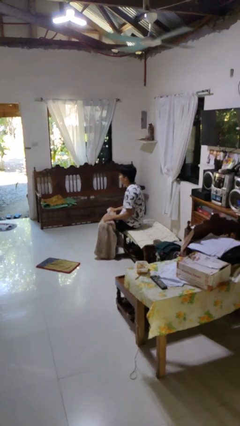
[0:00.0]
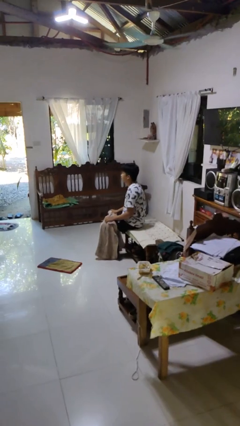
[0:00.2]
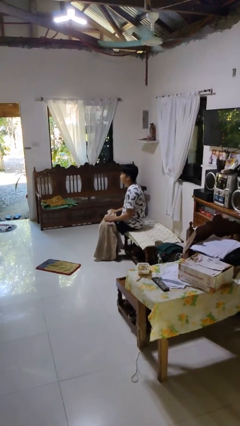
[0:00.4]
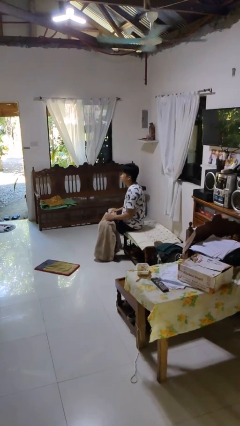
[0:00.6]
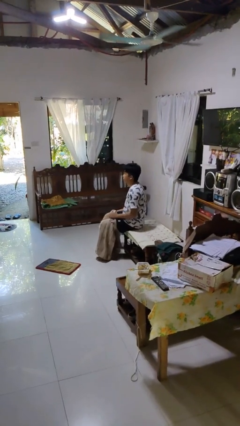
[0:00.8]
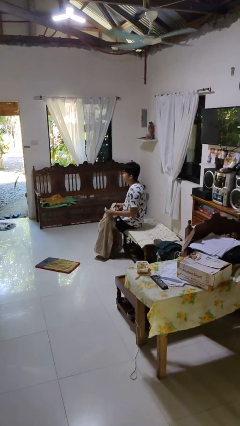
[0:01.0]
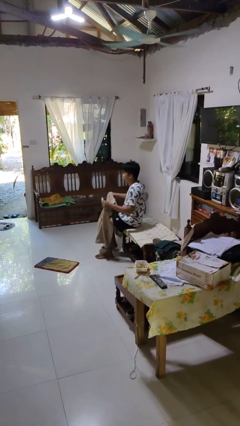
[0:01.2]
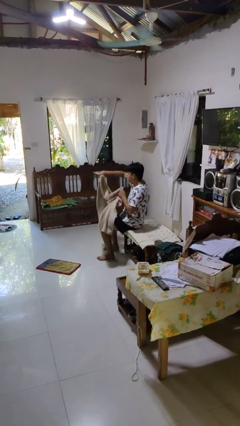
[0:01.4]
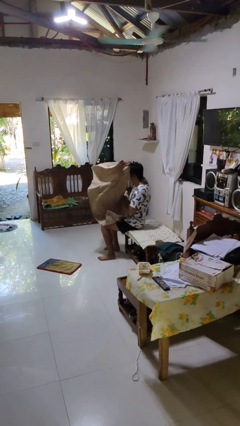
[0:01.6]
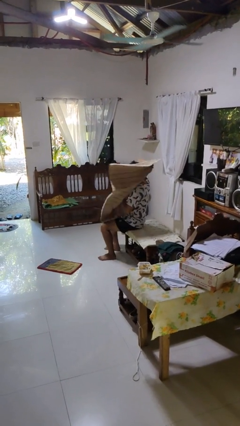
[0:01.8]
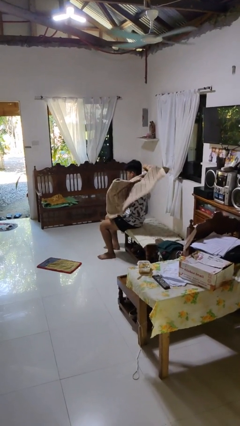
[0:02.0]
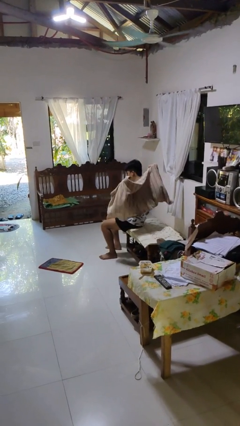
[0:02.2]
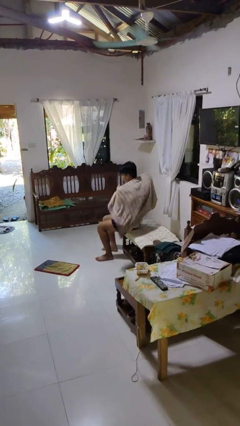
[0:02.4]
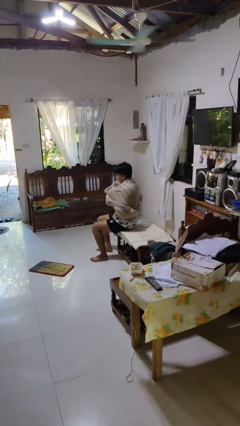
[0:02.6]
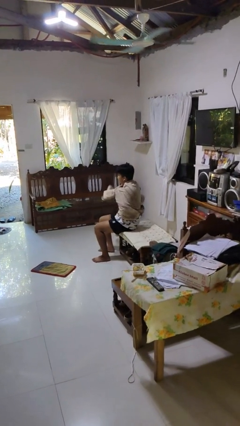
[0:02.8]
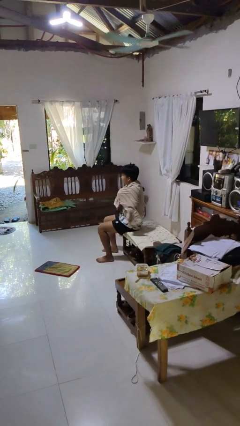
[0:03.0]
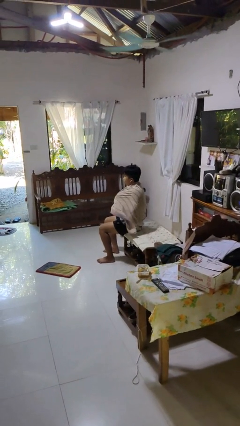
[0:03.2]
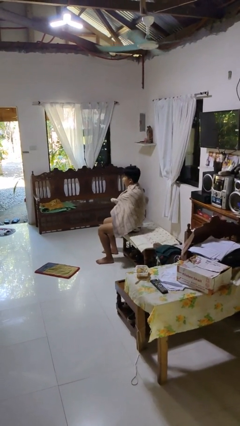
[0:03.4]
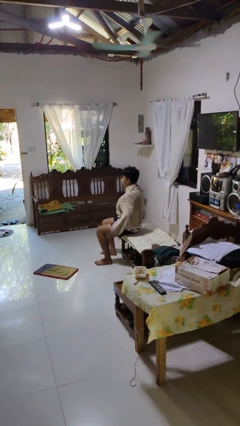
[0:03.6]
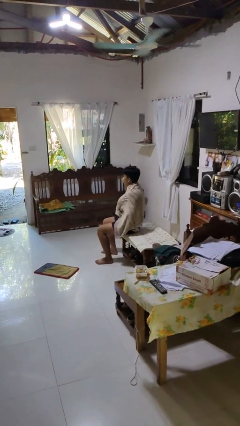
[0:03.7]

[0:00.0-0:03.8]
person covers with blanket

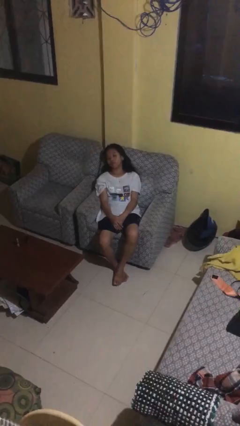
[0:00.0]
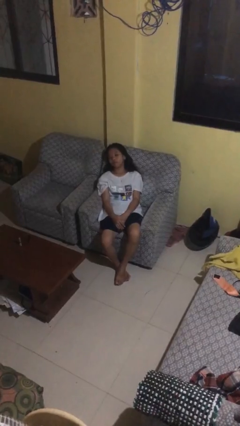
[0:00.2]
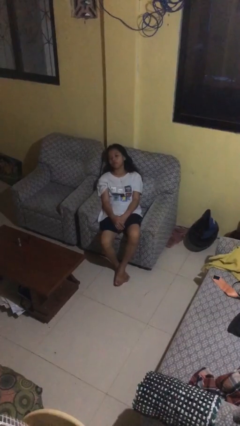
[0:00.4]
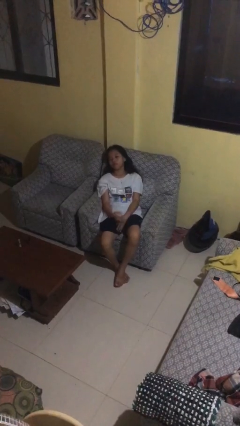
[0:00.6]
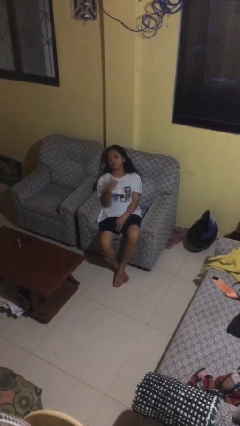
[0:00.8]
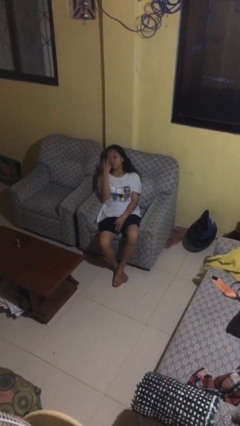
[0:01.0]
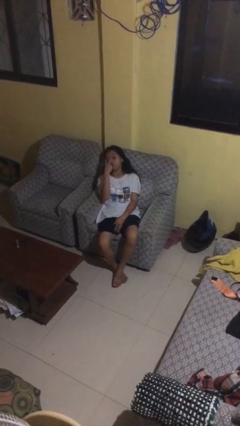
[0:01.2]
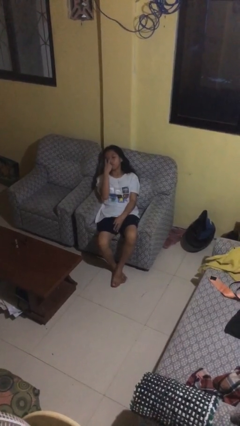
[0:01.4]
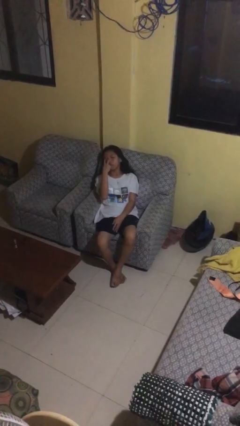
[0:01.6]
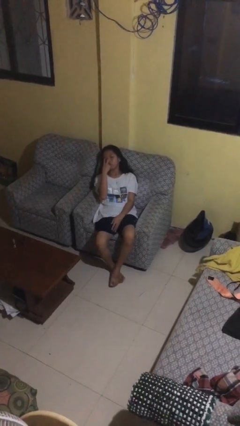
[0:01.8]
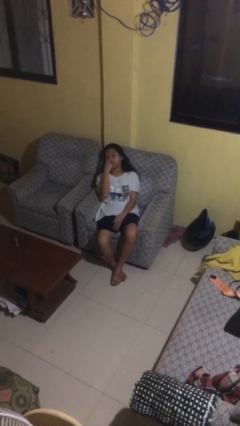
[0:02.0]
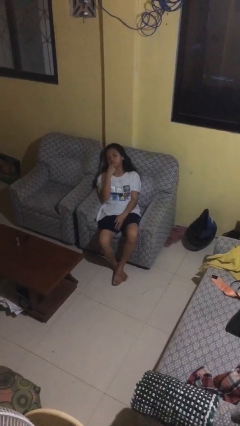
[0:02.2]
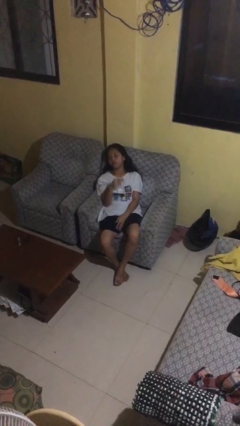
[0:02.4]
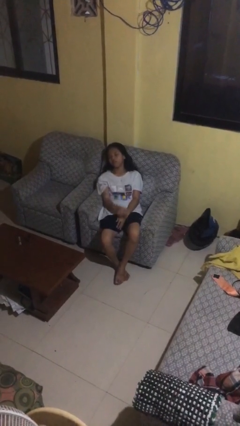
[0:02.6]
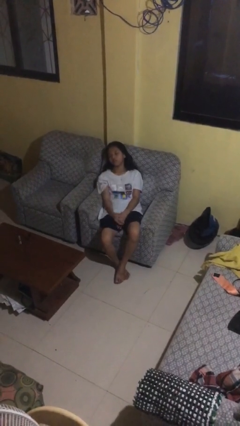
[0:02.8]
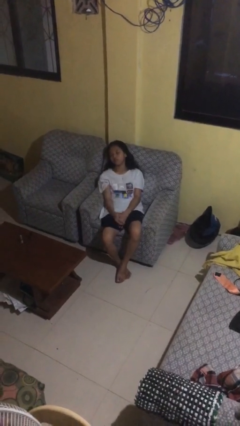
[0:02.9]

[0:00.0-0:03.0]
person gestures watch closely

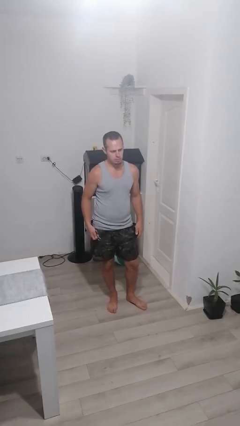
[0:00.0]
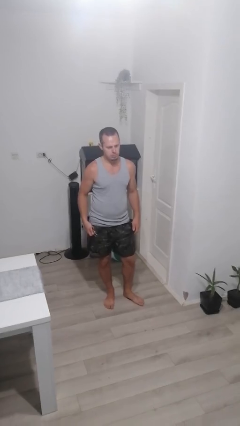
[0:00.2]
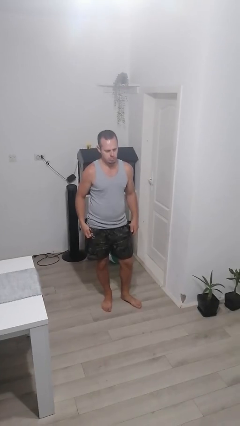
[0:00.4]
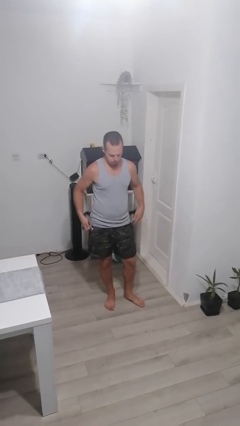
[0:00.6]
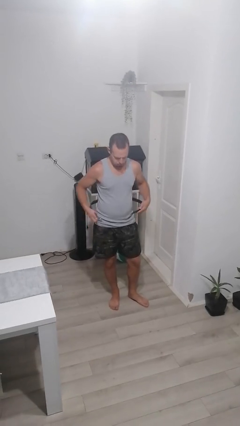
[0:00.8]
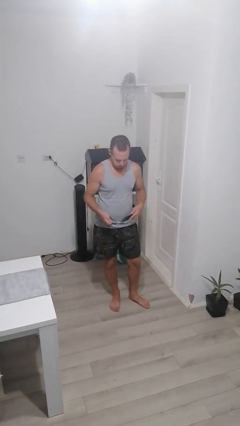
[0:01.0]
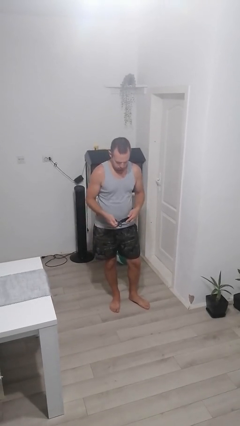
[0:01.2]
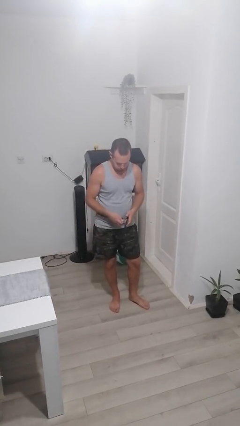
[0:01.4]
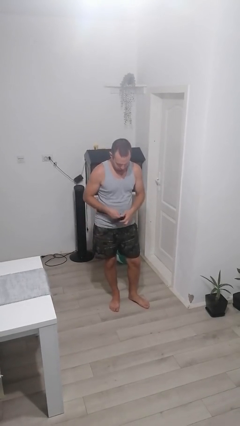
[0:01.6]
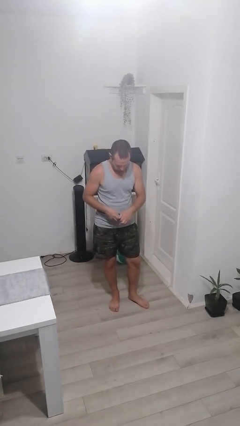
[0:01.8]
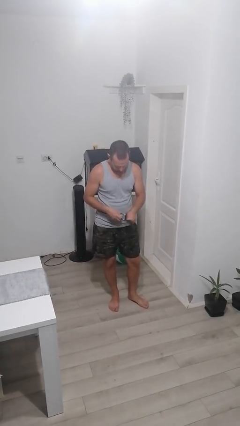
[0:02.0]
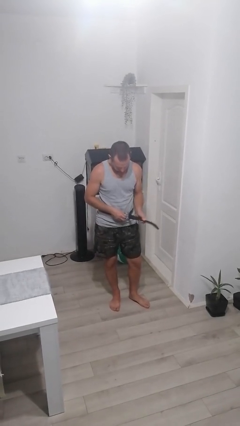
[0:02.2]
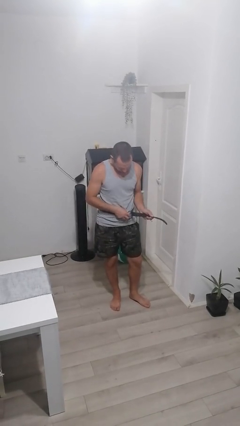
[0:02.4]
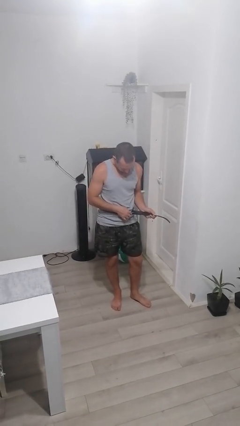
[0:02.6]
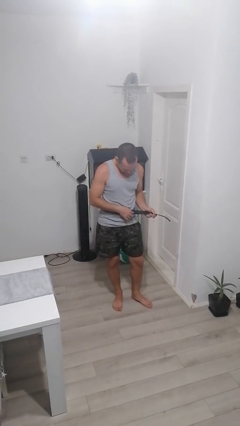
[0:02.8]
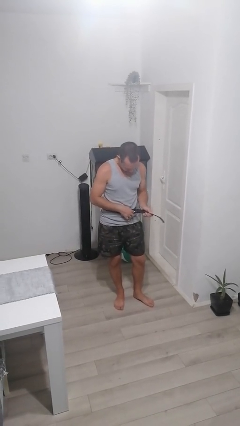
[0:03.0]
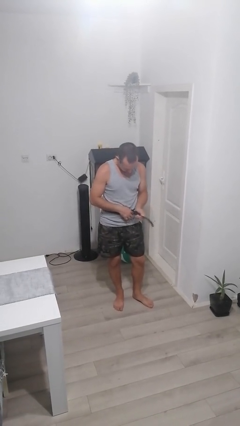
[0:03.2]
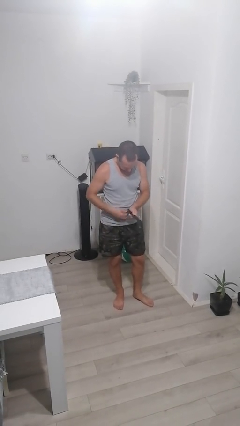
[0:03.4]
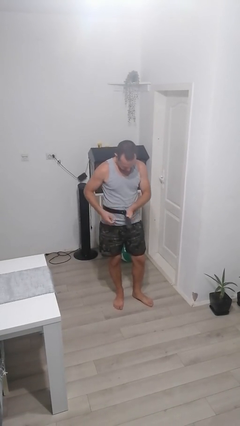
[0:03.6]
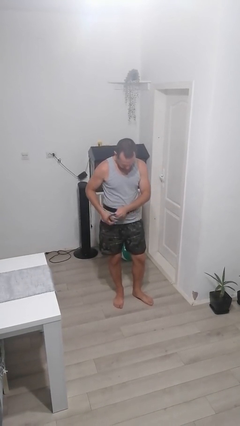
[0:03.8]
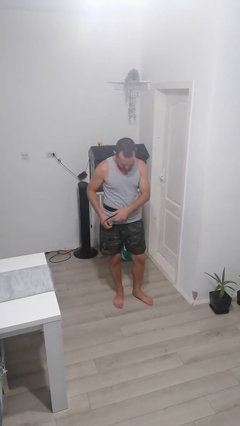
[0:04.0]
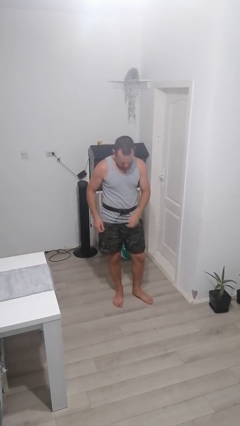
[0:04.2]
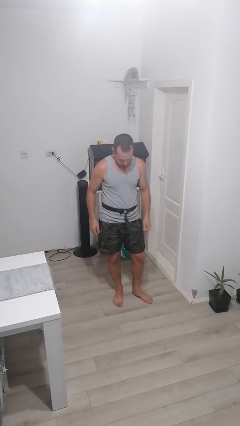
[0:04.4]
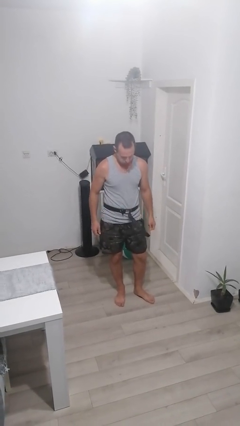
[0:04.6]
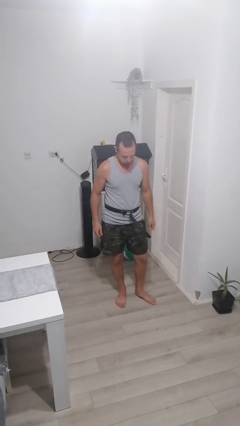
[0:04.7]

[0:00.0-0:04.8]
person puts on belt

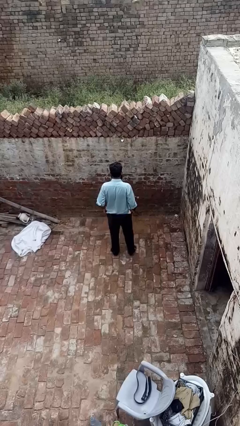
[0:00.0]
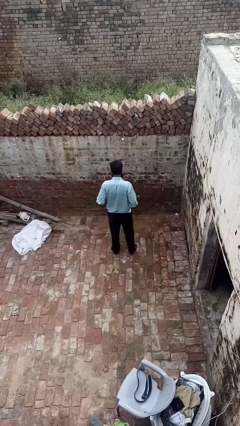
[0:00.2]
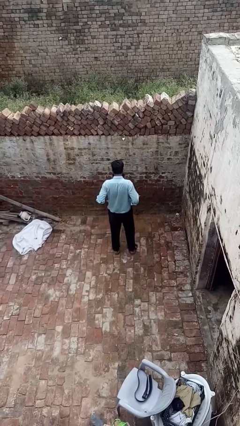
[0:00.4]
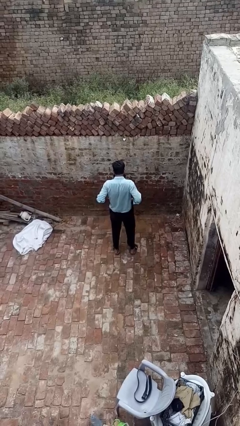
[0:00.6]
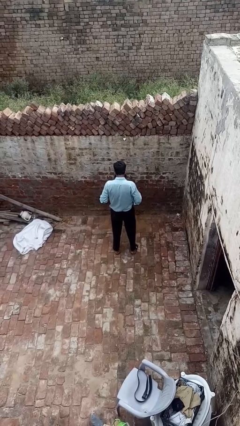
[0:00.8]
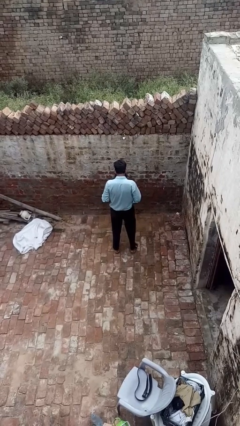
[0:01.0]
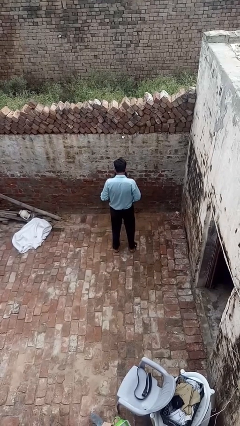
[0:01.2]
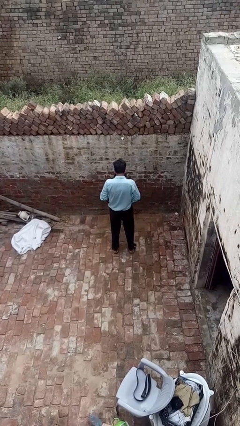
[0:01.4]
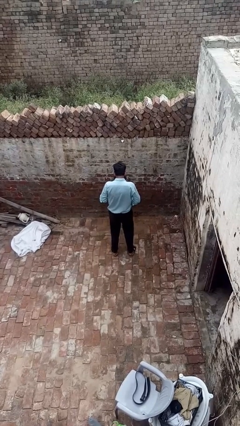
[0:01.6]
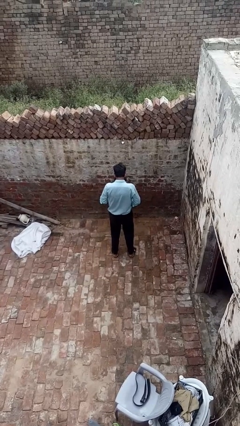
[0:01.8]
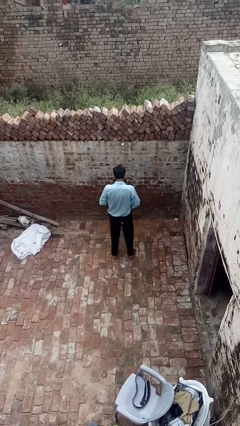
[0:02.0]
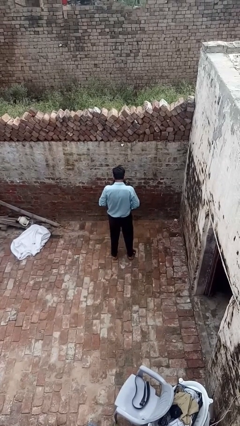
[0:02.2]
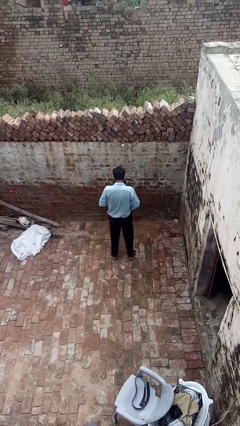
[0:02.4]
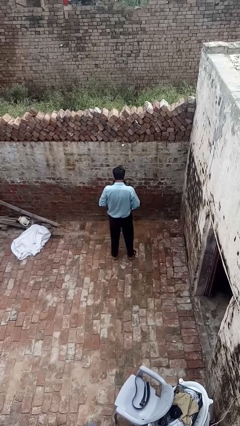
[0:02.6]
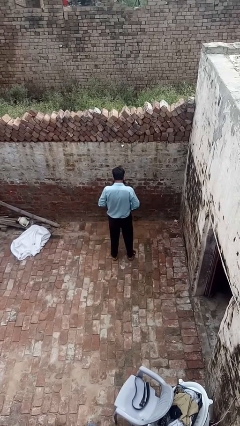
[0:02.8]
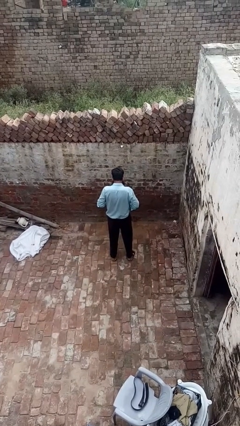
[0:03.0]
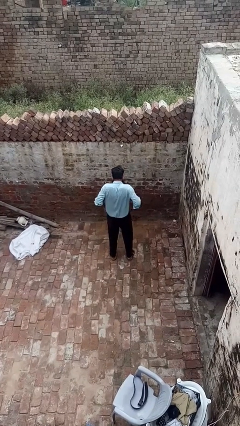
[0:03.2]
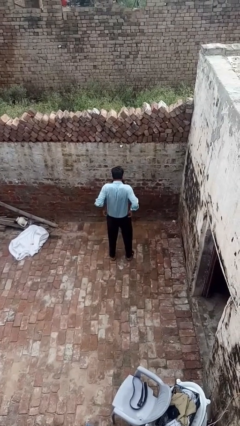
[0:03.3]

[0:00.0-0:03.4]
person hikes up pants

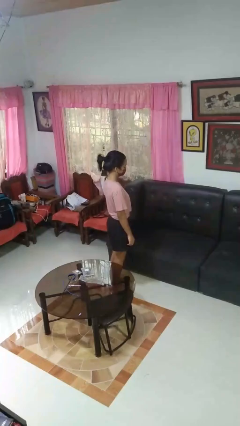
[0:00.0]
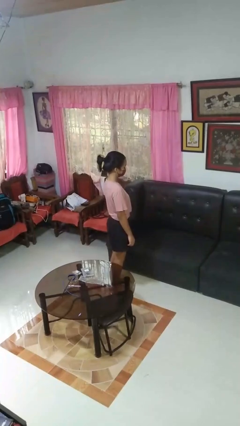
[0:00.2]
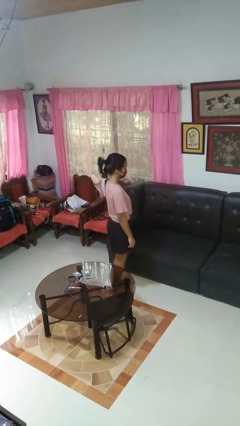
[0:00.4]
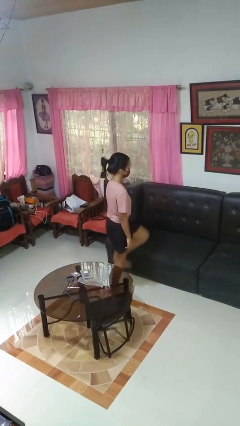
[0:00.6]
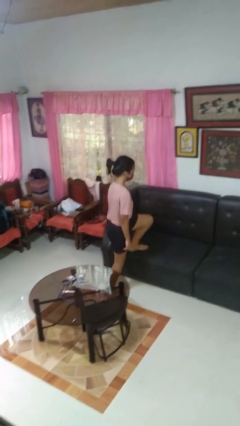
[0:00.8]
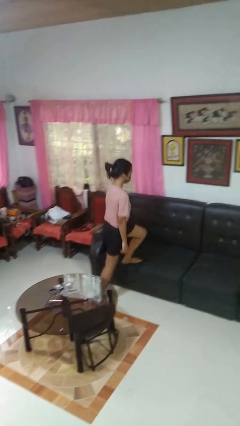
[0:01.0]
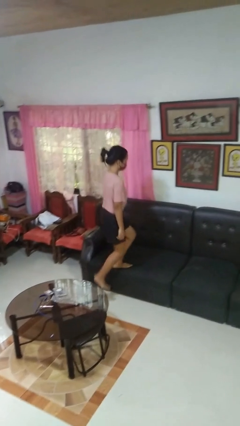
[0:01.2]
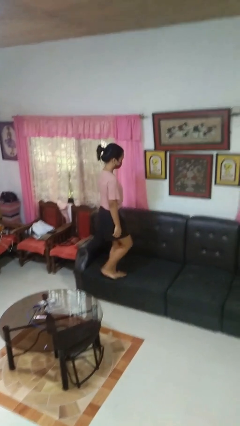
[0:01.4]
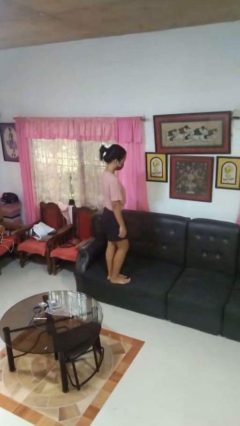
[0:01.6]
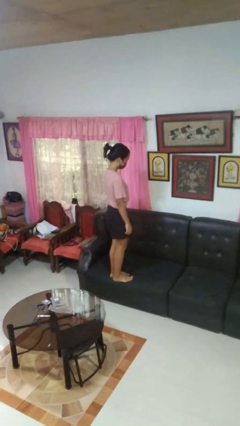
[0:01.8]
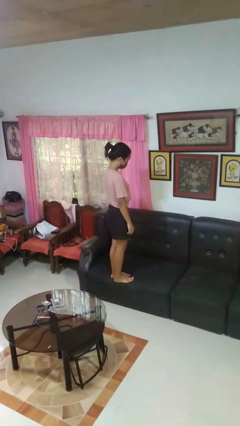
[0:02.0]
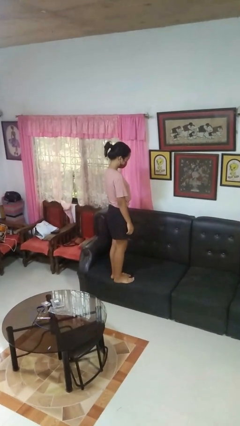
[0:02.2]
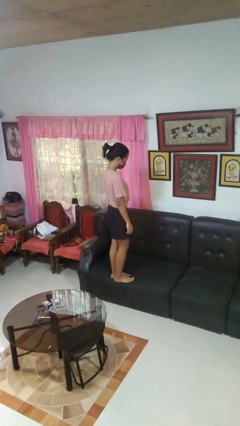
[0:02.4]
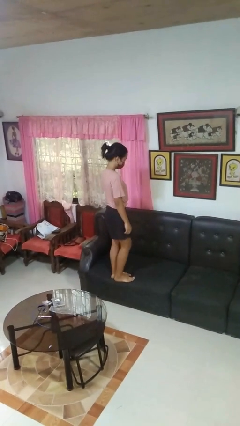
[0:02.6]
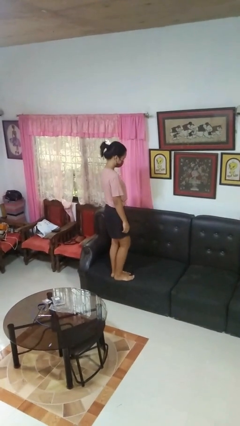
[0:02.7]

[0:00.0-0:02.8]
person climbs on couch
